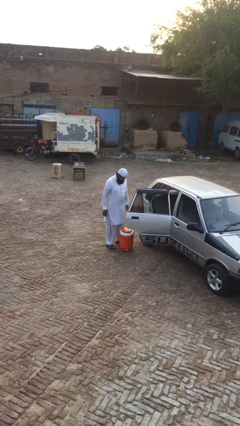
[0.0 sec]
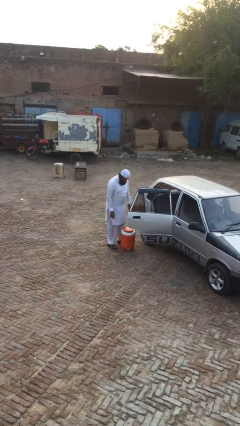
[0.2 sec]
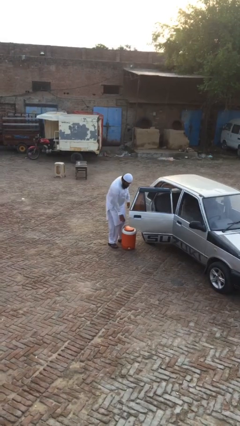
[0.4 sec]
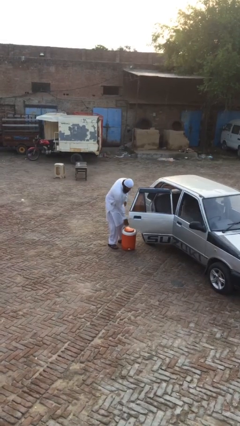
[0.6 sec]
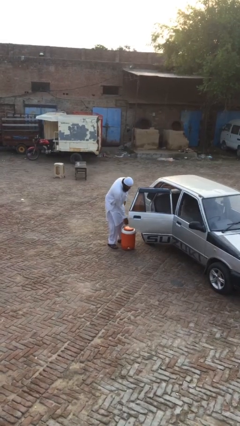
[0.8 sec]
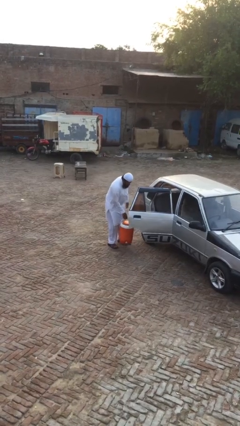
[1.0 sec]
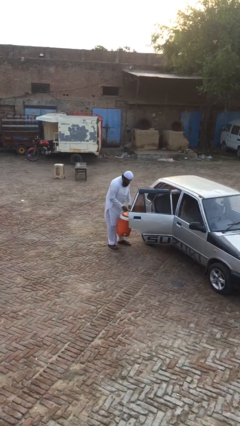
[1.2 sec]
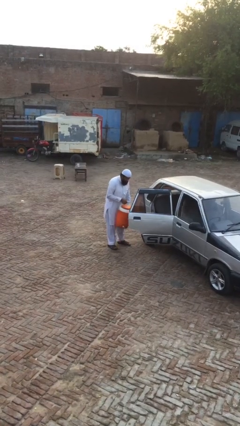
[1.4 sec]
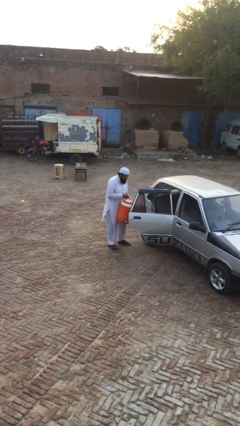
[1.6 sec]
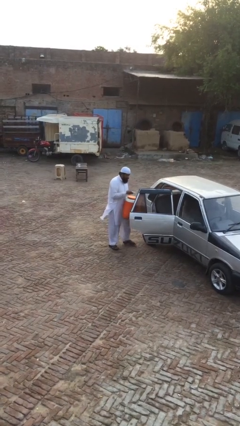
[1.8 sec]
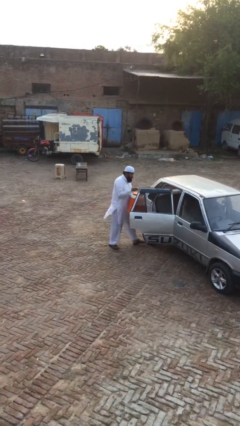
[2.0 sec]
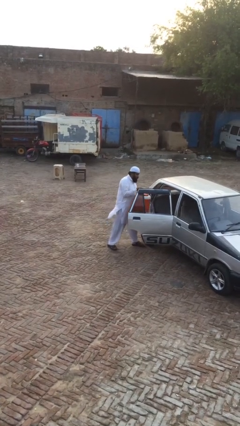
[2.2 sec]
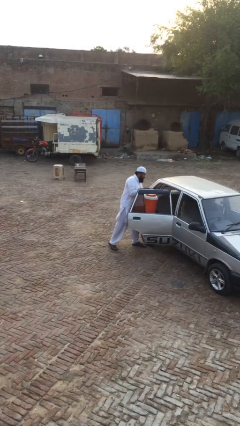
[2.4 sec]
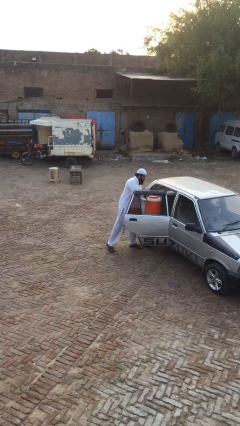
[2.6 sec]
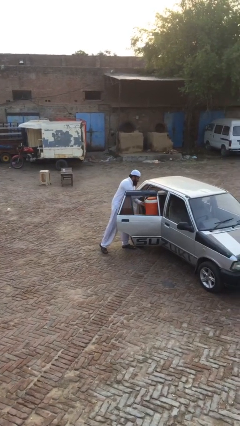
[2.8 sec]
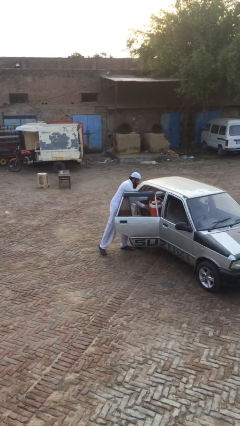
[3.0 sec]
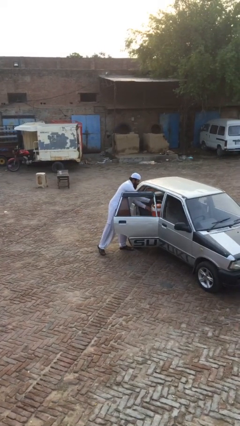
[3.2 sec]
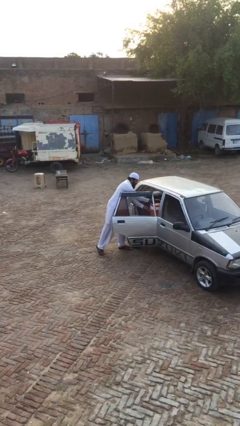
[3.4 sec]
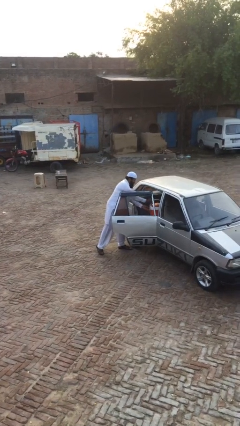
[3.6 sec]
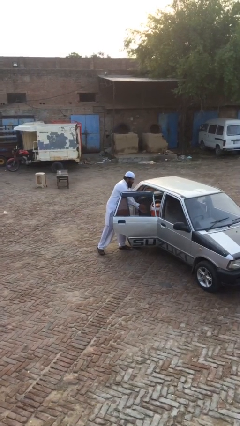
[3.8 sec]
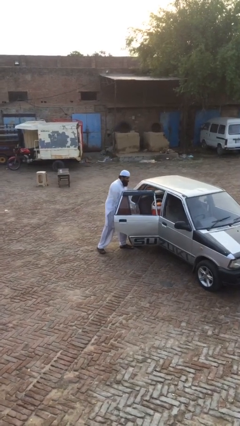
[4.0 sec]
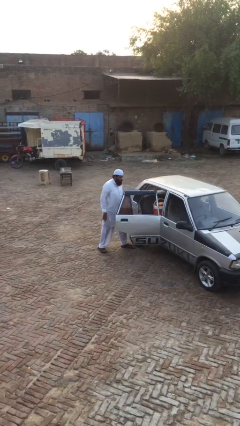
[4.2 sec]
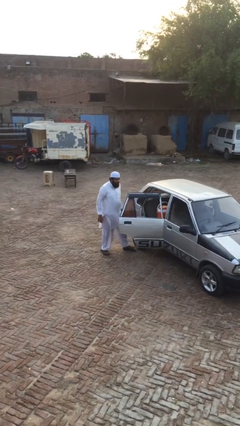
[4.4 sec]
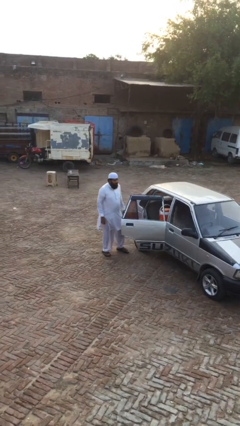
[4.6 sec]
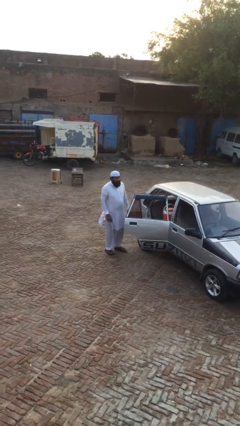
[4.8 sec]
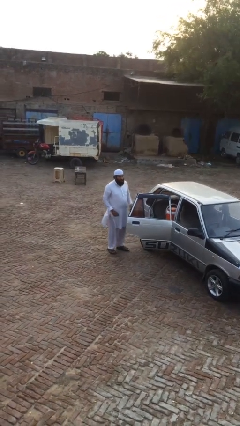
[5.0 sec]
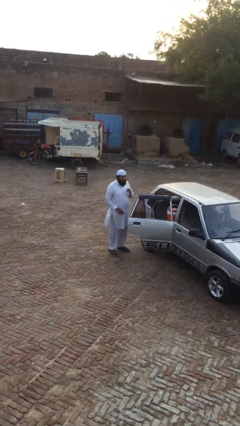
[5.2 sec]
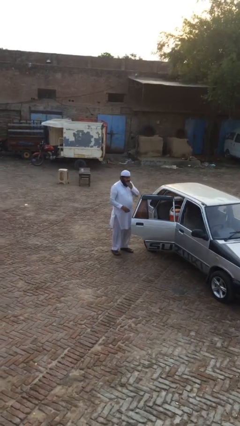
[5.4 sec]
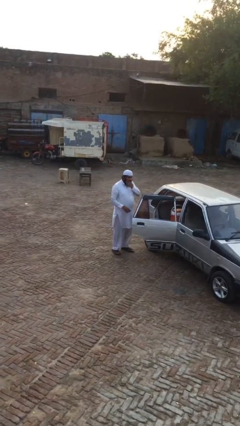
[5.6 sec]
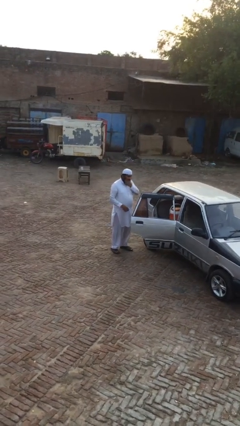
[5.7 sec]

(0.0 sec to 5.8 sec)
person loads car

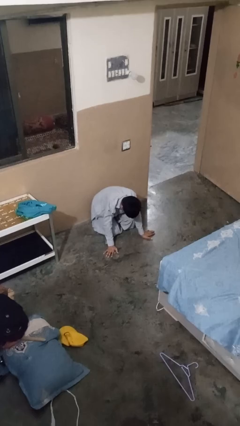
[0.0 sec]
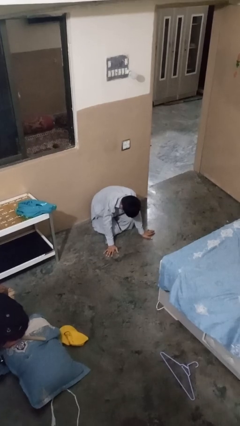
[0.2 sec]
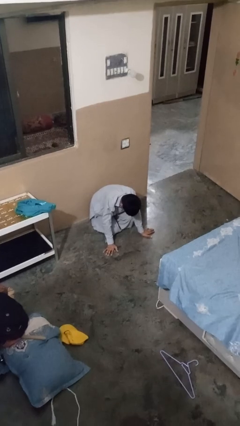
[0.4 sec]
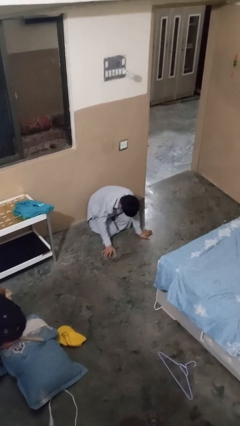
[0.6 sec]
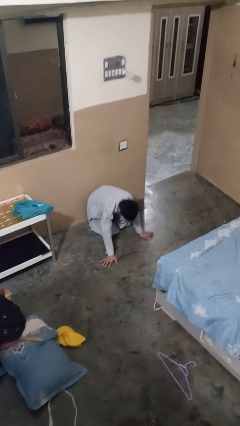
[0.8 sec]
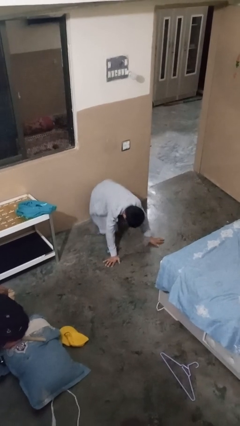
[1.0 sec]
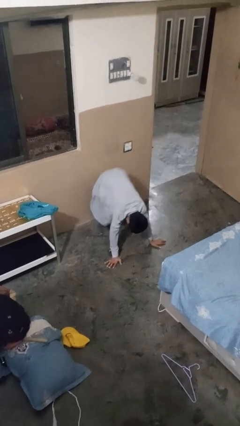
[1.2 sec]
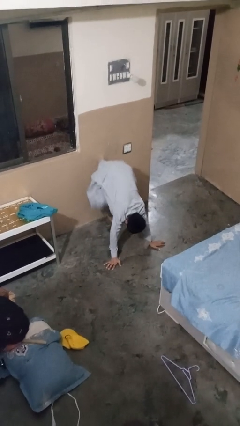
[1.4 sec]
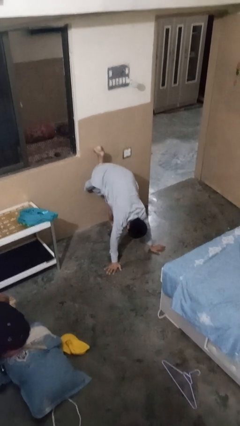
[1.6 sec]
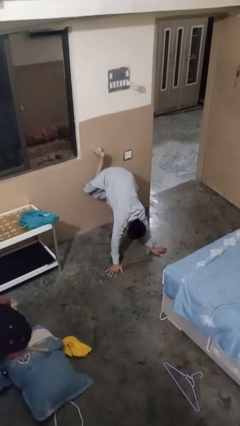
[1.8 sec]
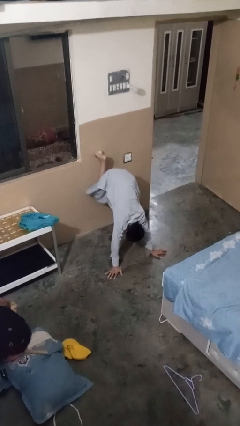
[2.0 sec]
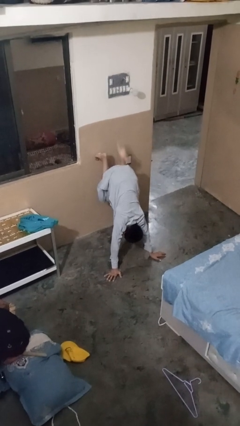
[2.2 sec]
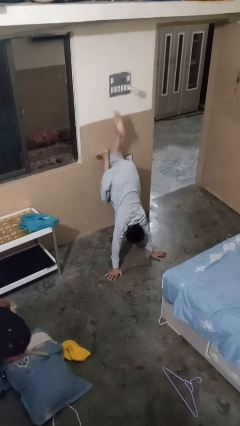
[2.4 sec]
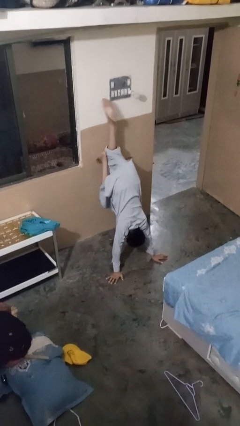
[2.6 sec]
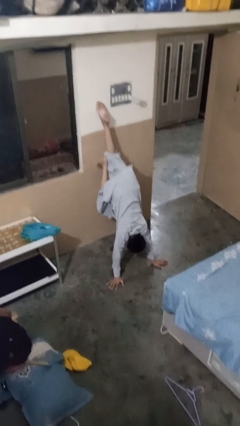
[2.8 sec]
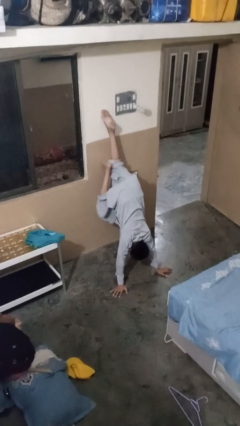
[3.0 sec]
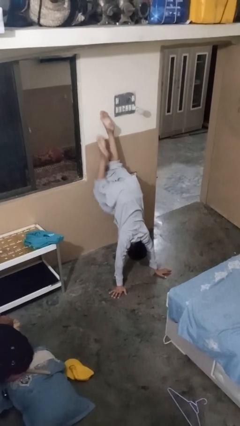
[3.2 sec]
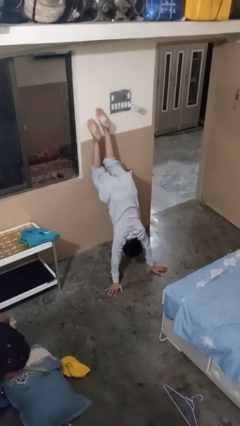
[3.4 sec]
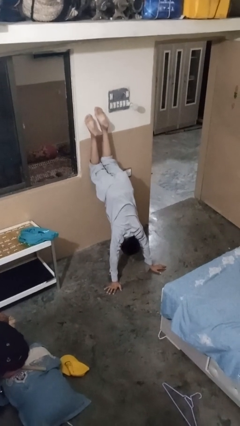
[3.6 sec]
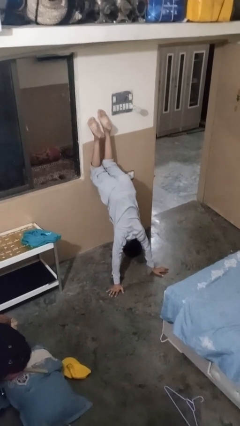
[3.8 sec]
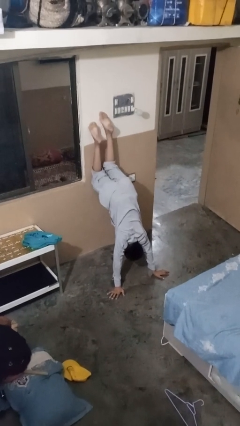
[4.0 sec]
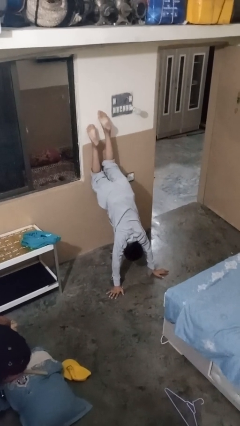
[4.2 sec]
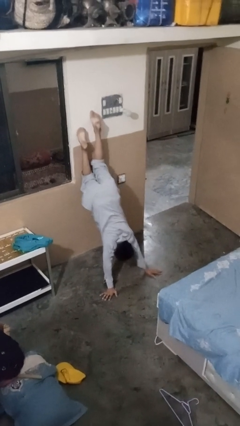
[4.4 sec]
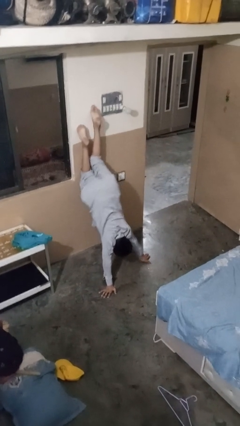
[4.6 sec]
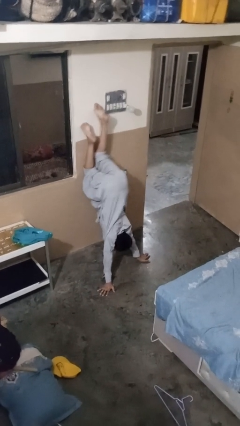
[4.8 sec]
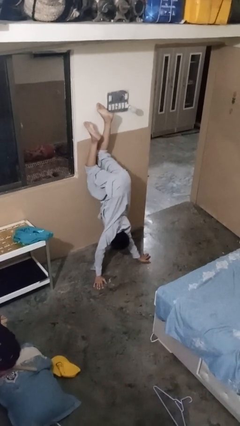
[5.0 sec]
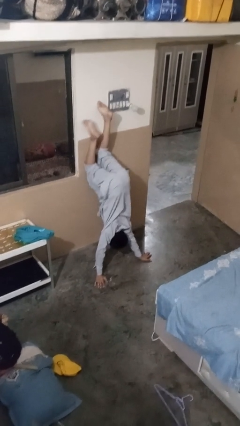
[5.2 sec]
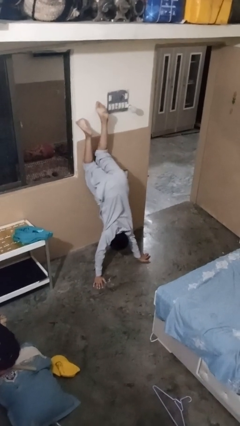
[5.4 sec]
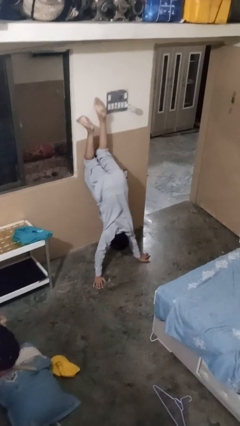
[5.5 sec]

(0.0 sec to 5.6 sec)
person handstand

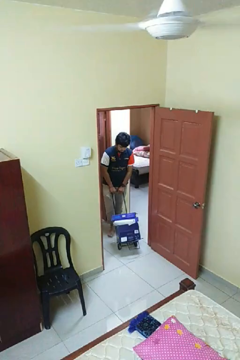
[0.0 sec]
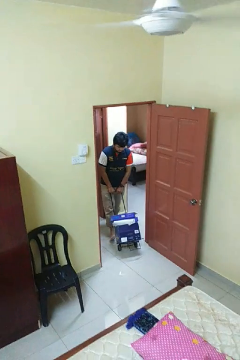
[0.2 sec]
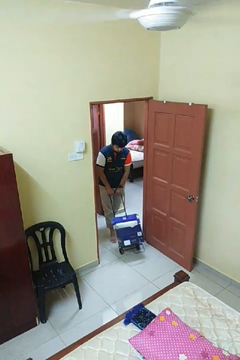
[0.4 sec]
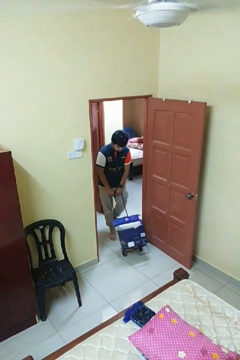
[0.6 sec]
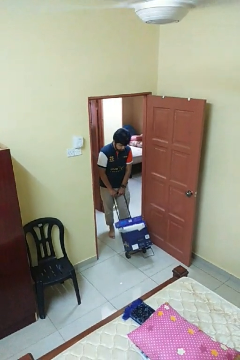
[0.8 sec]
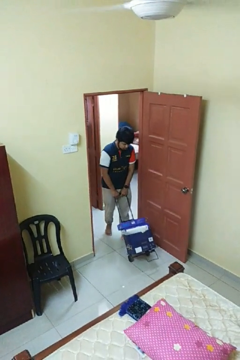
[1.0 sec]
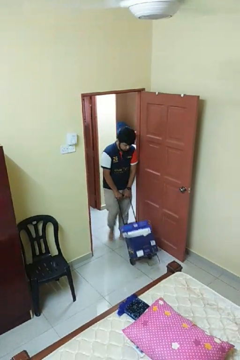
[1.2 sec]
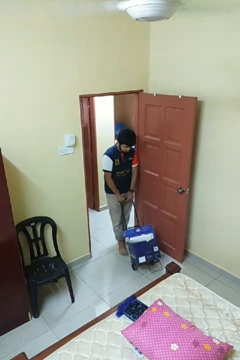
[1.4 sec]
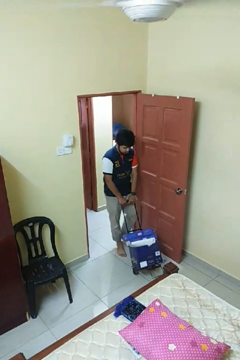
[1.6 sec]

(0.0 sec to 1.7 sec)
person pushes wheeled cart

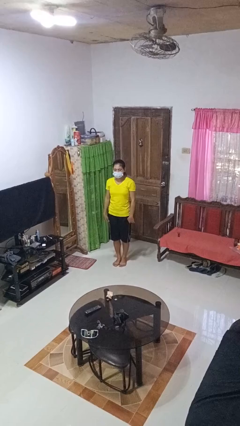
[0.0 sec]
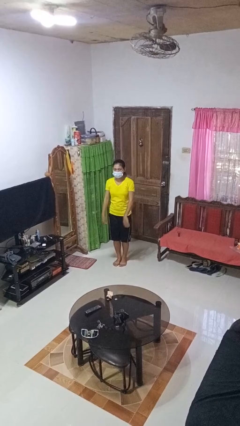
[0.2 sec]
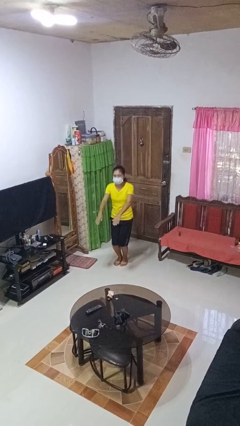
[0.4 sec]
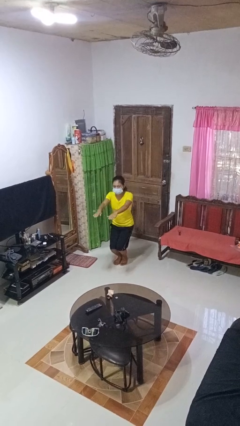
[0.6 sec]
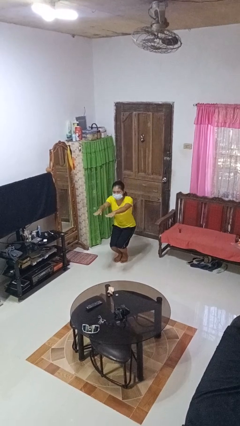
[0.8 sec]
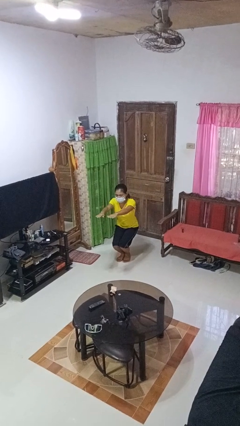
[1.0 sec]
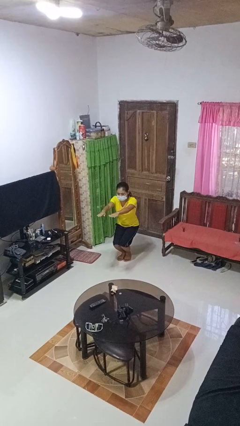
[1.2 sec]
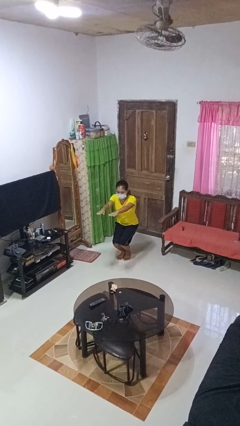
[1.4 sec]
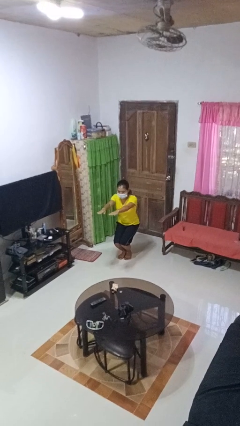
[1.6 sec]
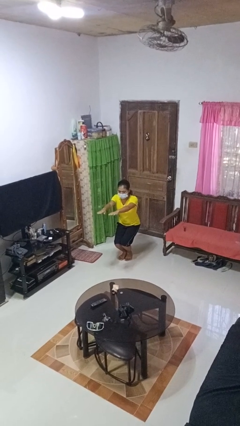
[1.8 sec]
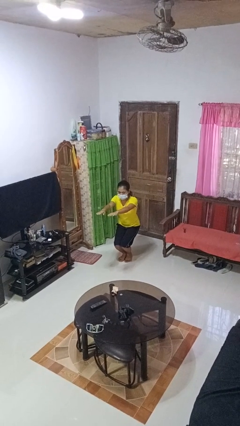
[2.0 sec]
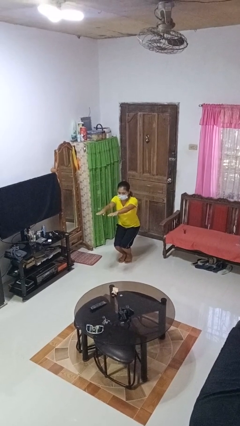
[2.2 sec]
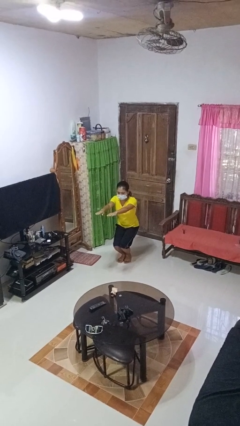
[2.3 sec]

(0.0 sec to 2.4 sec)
person squats

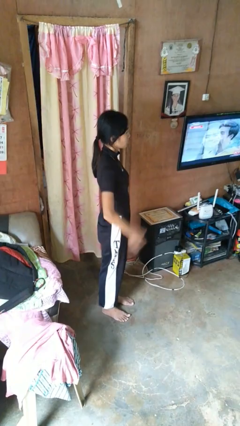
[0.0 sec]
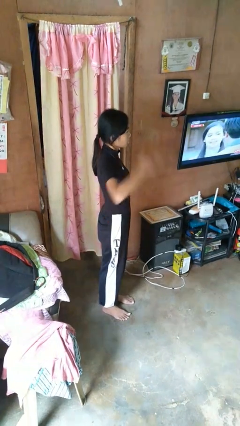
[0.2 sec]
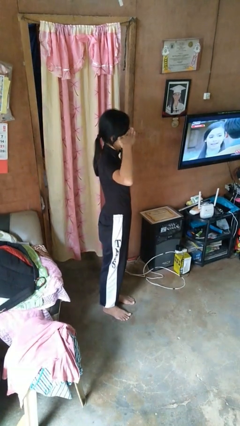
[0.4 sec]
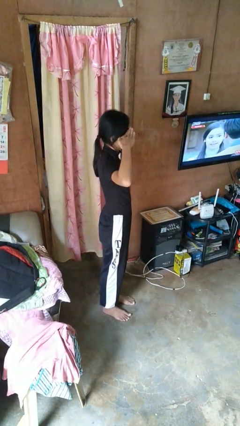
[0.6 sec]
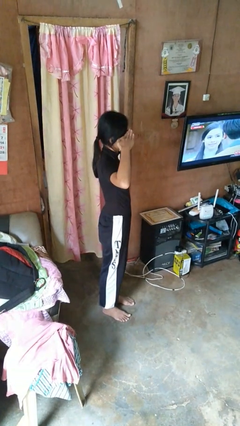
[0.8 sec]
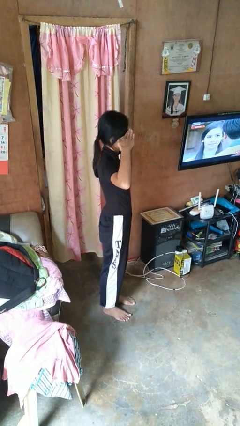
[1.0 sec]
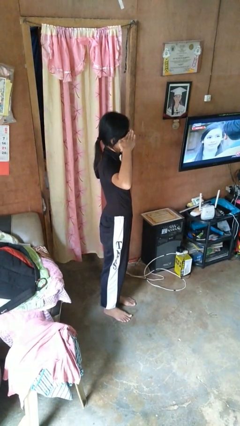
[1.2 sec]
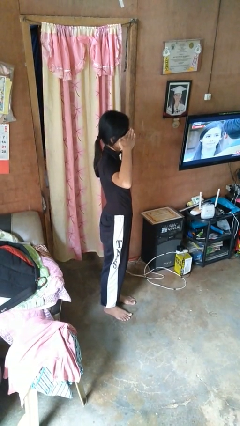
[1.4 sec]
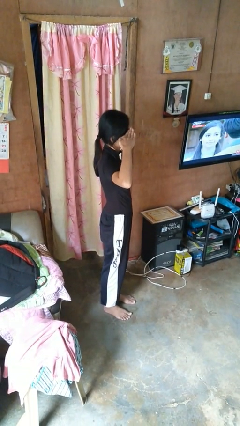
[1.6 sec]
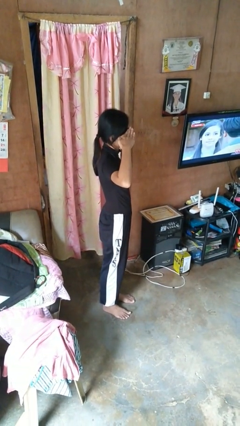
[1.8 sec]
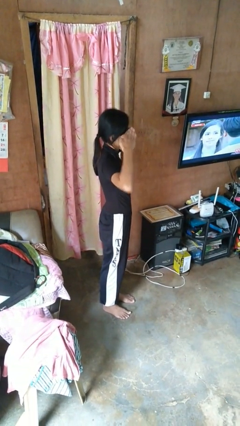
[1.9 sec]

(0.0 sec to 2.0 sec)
person salutes

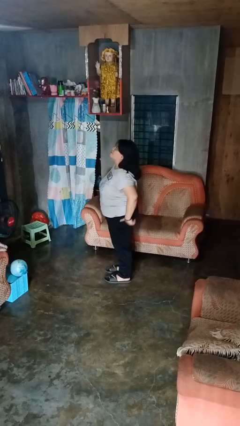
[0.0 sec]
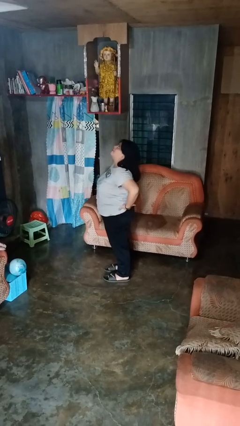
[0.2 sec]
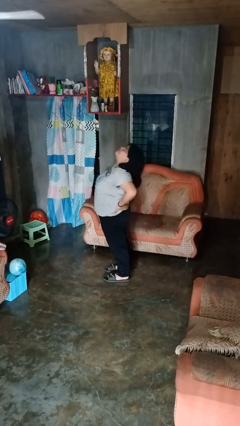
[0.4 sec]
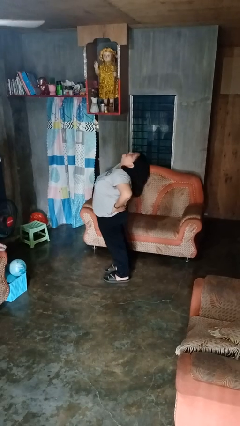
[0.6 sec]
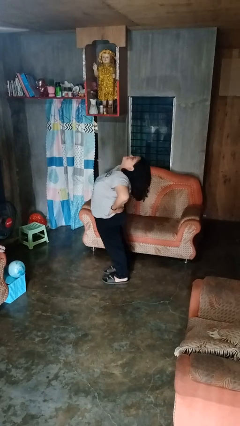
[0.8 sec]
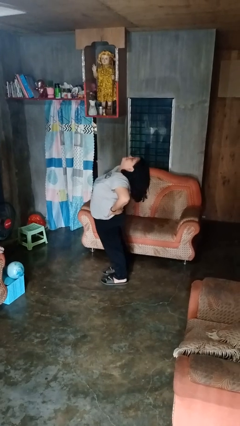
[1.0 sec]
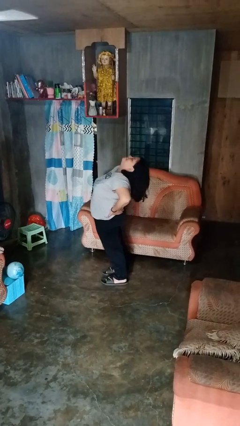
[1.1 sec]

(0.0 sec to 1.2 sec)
person stretches back
